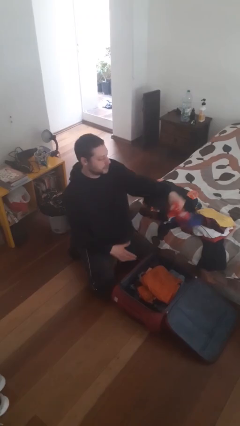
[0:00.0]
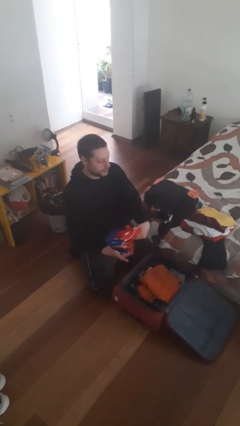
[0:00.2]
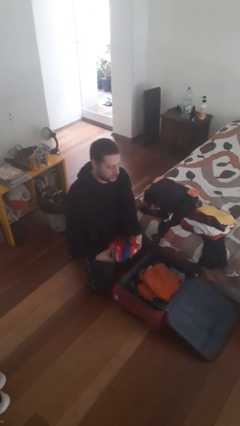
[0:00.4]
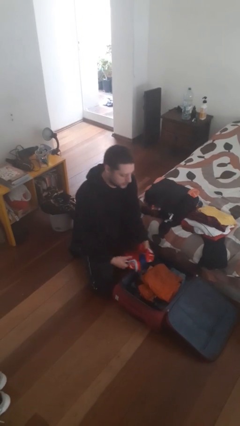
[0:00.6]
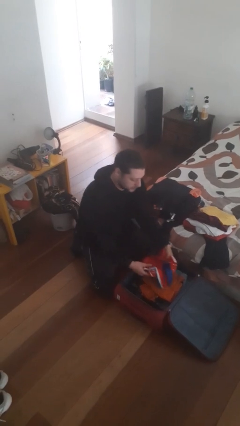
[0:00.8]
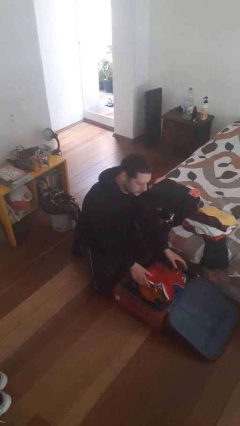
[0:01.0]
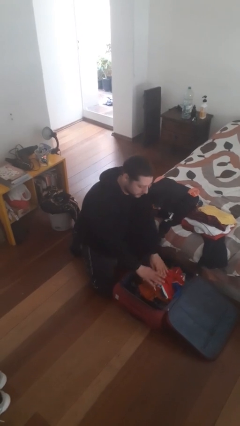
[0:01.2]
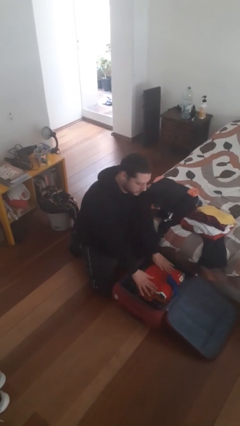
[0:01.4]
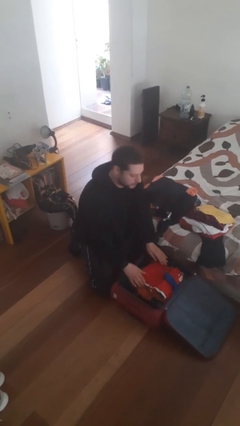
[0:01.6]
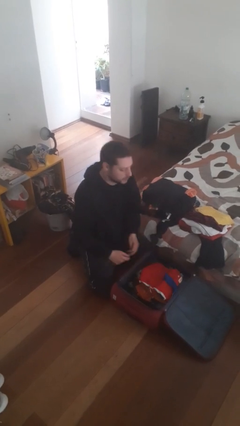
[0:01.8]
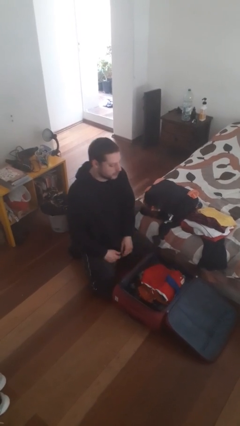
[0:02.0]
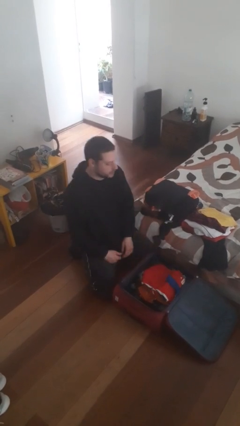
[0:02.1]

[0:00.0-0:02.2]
person loads clothes into suitcase

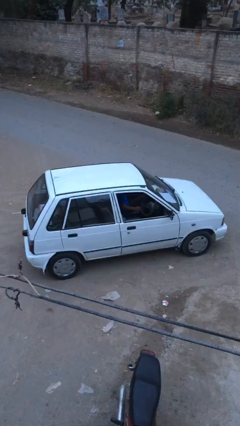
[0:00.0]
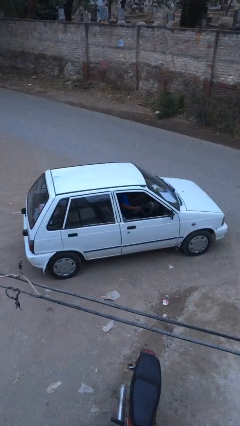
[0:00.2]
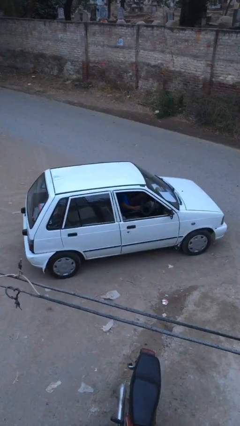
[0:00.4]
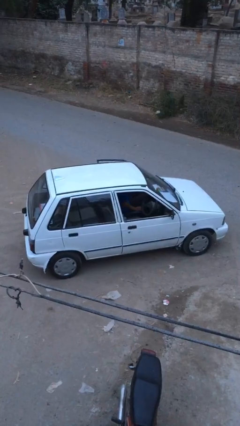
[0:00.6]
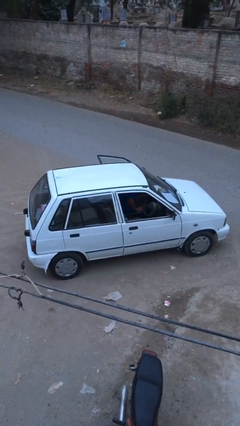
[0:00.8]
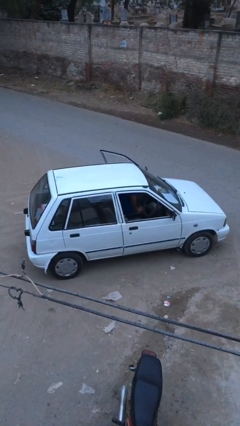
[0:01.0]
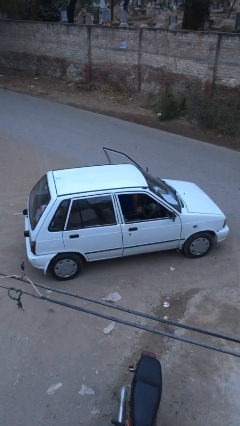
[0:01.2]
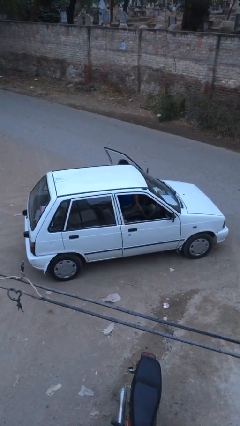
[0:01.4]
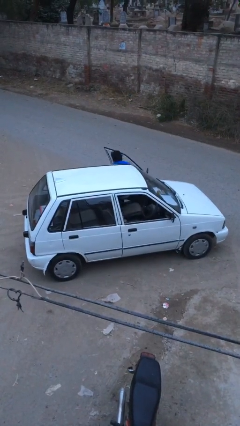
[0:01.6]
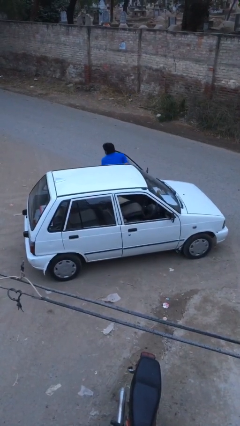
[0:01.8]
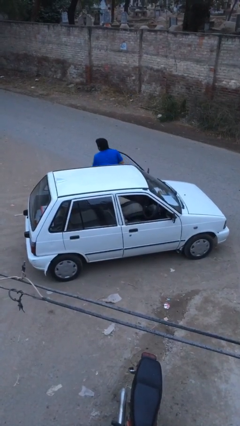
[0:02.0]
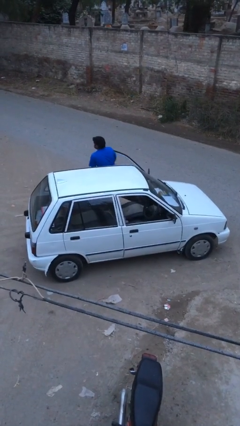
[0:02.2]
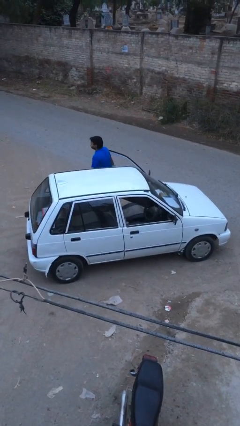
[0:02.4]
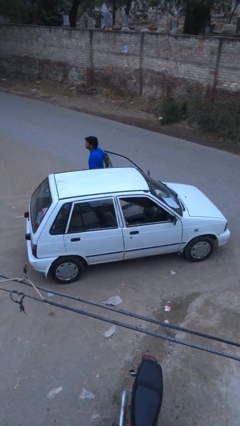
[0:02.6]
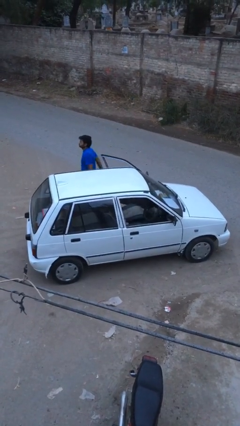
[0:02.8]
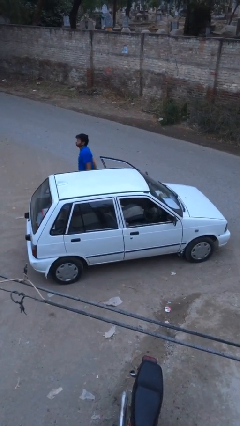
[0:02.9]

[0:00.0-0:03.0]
car drops off person

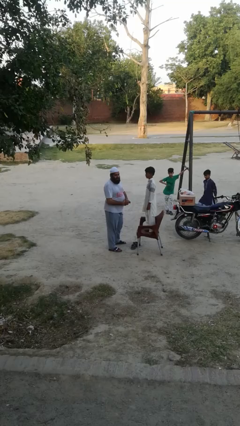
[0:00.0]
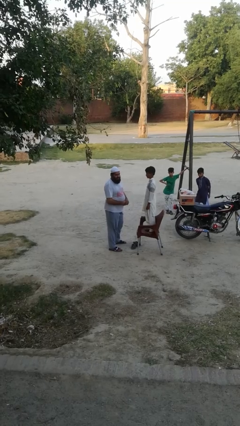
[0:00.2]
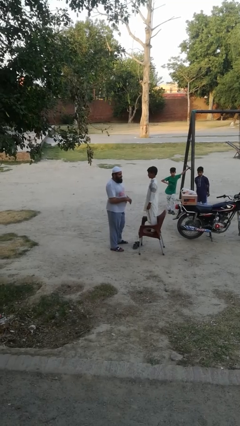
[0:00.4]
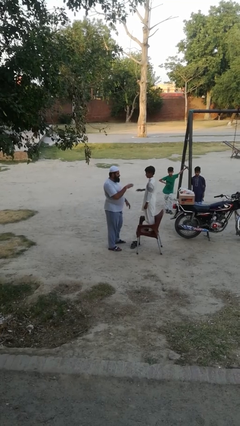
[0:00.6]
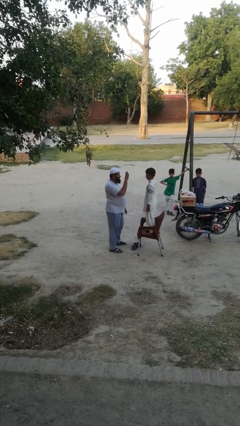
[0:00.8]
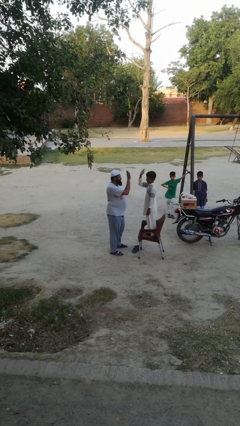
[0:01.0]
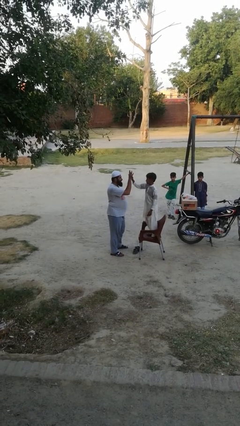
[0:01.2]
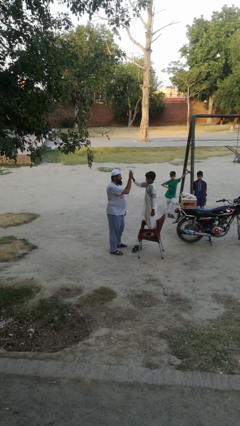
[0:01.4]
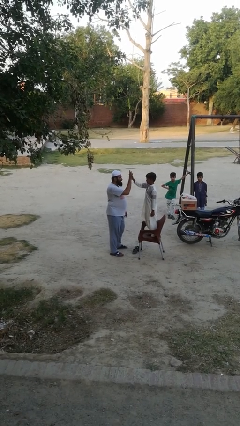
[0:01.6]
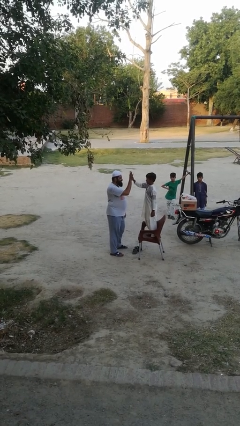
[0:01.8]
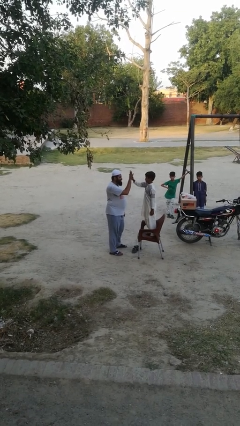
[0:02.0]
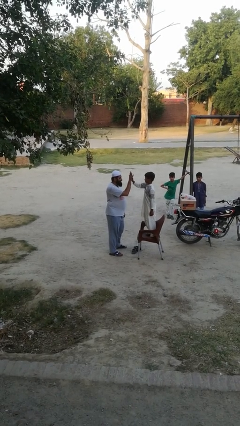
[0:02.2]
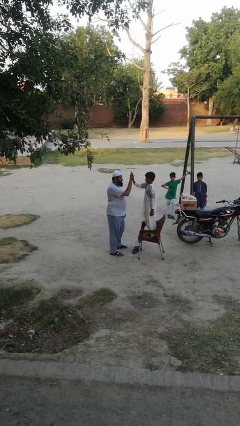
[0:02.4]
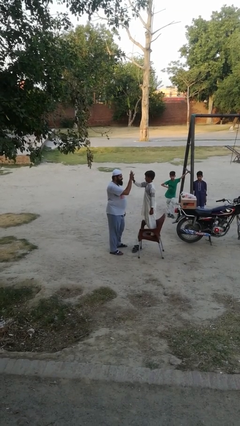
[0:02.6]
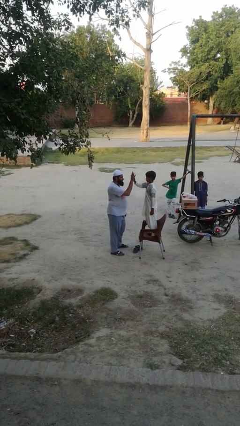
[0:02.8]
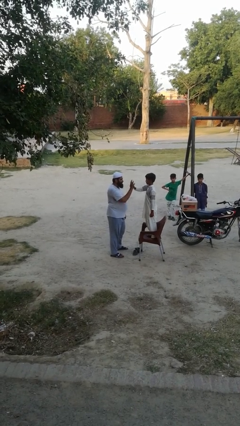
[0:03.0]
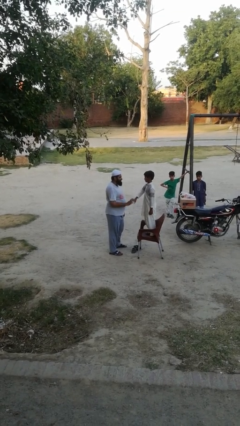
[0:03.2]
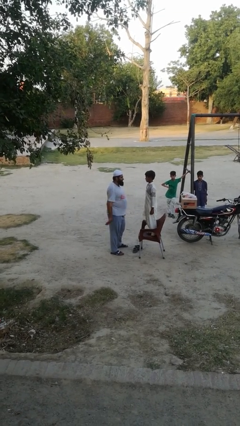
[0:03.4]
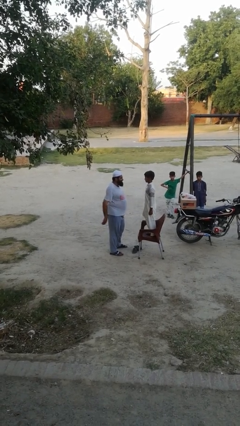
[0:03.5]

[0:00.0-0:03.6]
person highfives hand

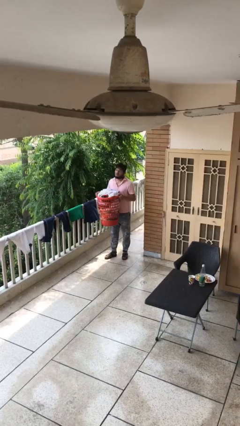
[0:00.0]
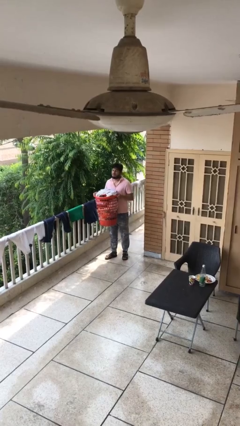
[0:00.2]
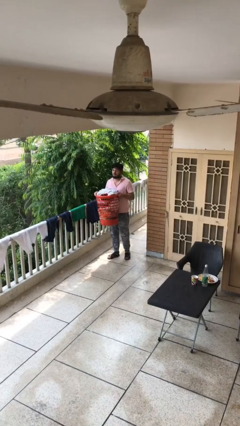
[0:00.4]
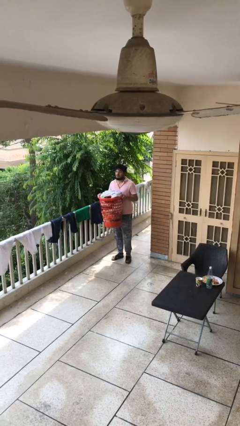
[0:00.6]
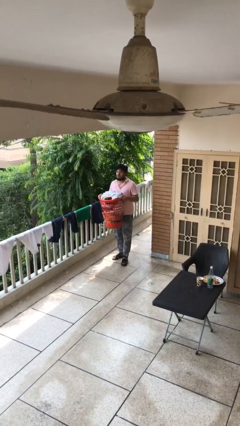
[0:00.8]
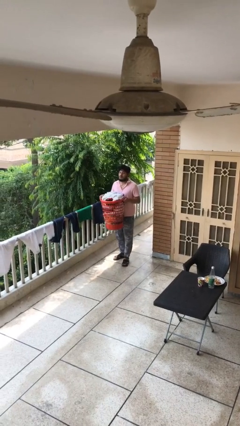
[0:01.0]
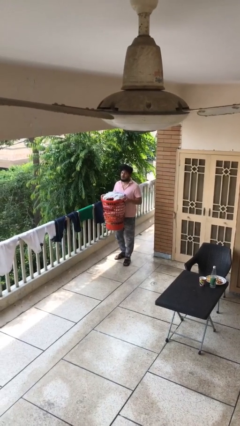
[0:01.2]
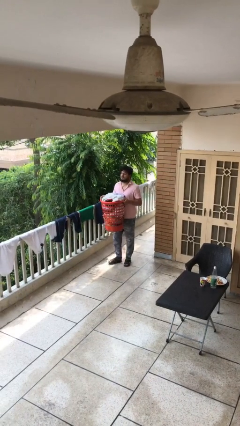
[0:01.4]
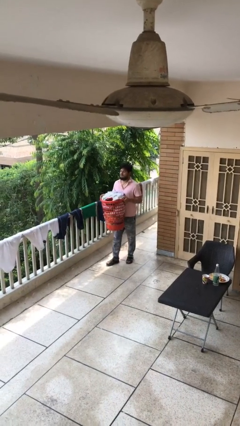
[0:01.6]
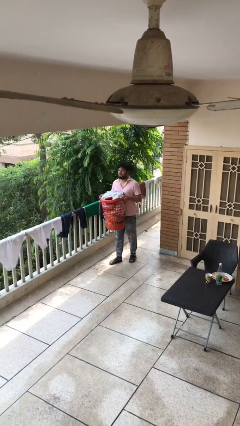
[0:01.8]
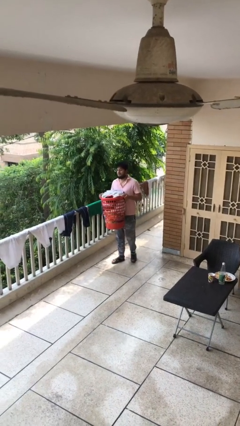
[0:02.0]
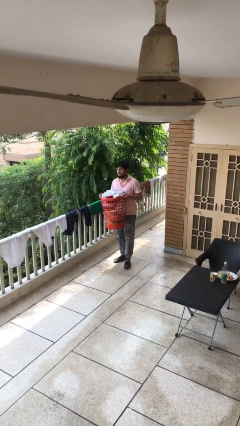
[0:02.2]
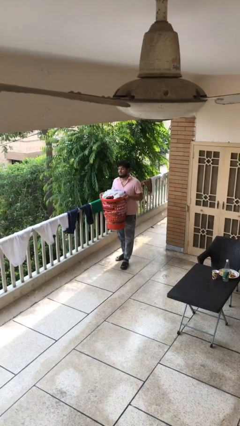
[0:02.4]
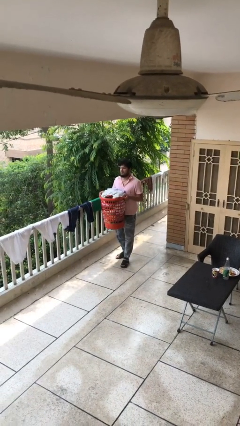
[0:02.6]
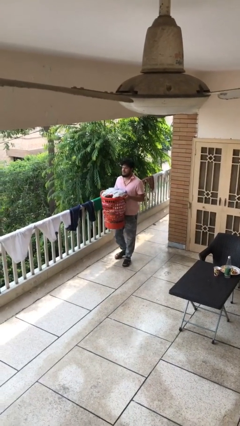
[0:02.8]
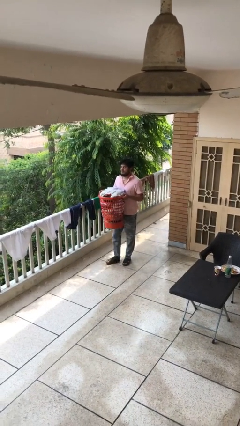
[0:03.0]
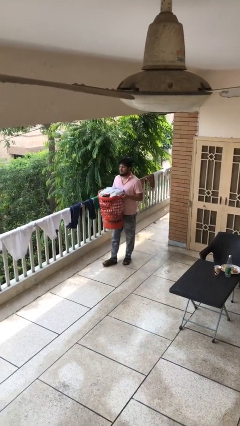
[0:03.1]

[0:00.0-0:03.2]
person carries heavy object

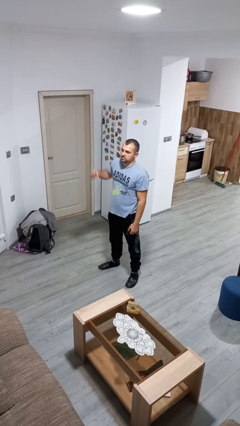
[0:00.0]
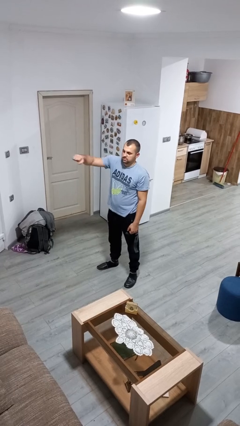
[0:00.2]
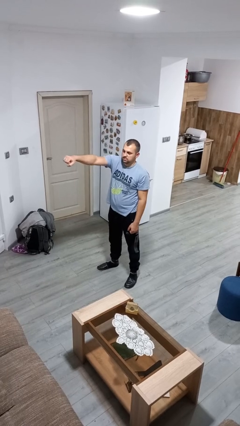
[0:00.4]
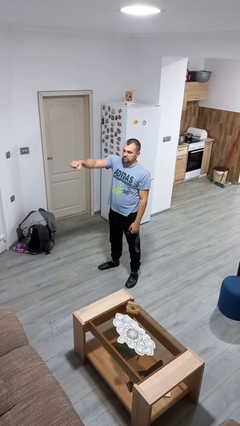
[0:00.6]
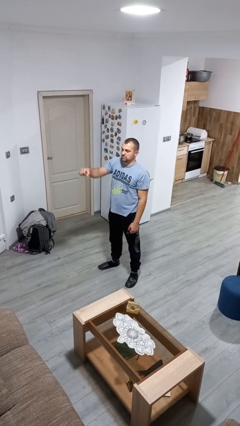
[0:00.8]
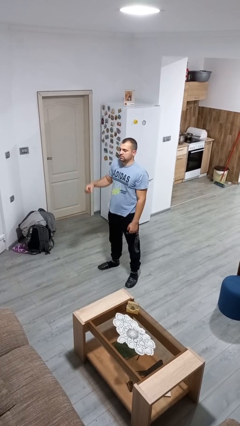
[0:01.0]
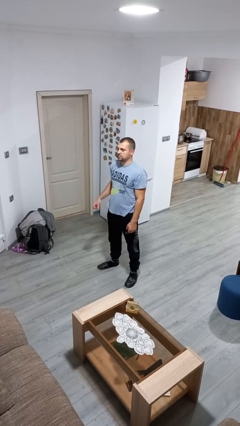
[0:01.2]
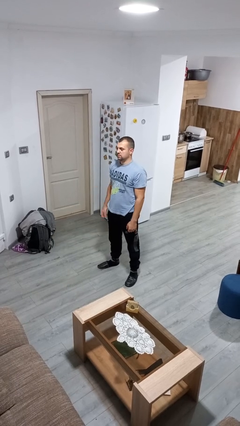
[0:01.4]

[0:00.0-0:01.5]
person punches

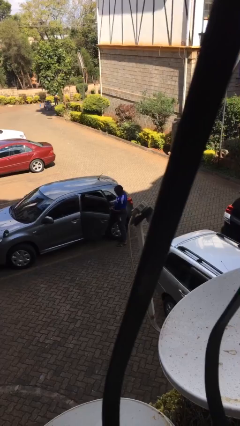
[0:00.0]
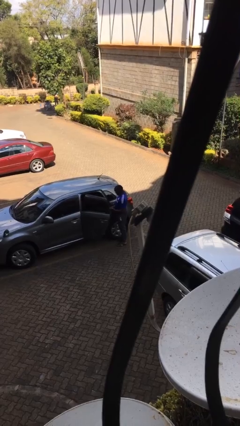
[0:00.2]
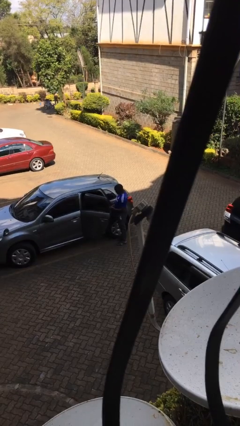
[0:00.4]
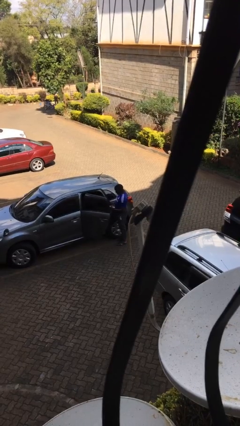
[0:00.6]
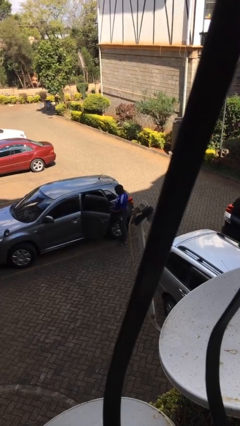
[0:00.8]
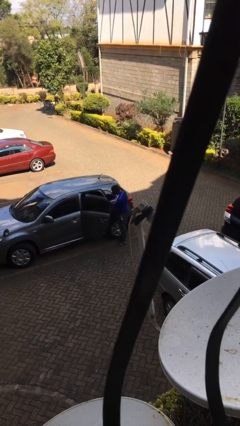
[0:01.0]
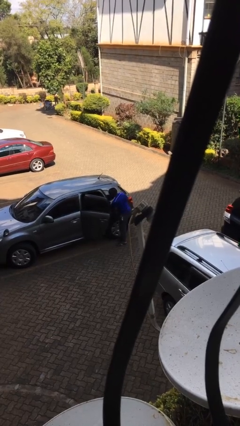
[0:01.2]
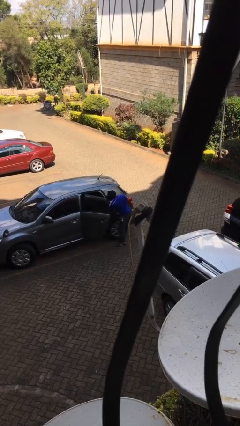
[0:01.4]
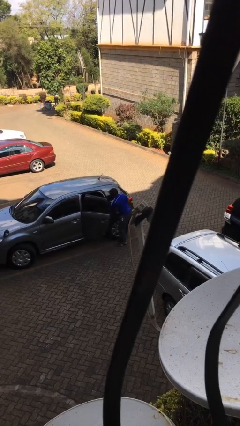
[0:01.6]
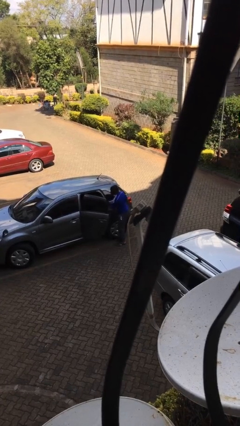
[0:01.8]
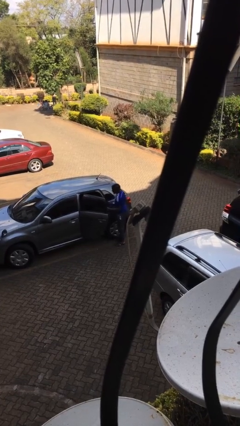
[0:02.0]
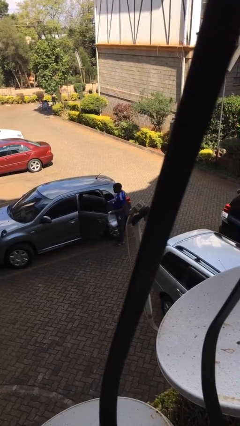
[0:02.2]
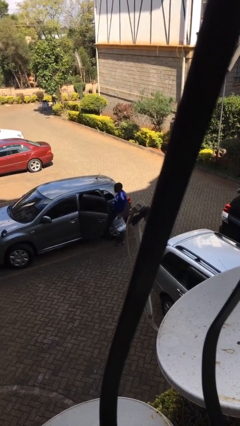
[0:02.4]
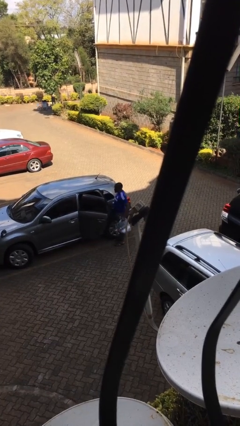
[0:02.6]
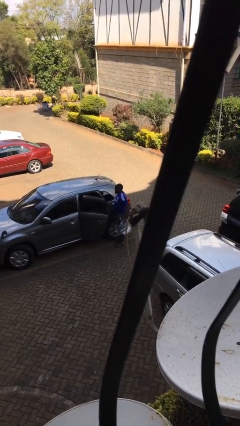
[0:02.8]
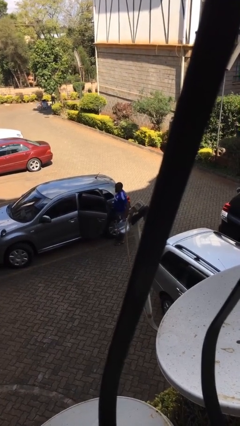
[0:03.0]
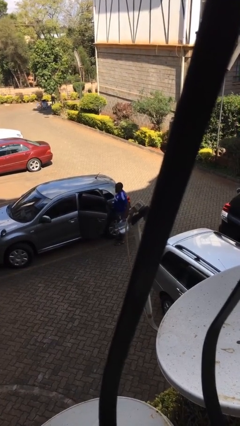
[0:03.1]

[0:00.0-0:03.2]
person unloads car

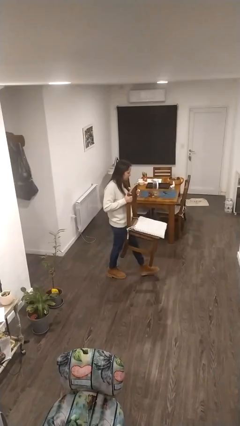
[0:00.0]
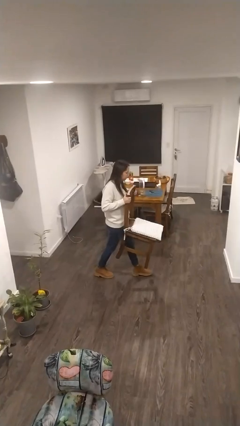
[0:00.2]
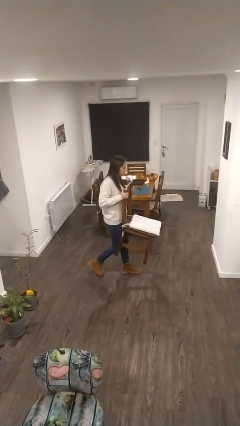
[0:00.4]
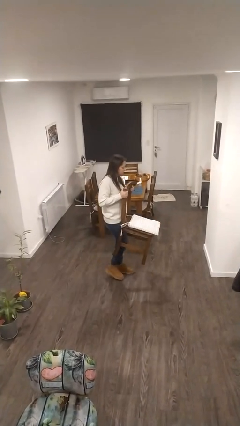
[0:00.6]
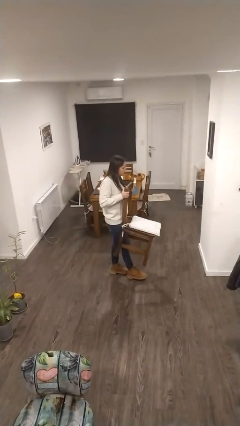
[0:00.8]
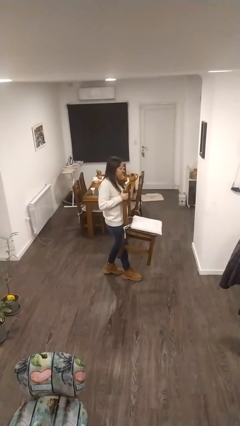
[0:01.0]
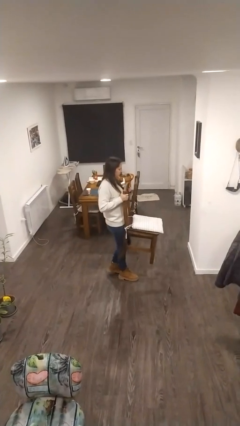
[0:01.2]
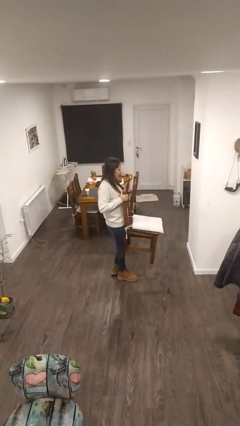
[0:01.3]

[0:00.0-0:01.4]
person carries furniture
